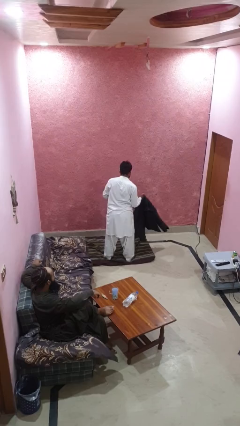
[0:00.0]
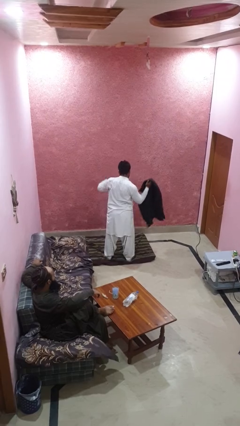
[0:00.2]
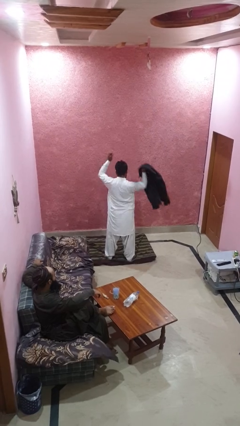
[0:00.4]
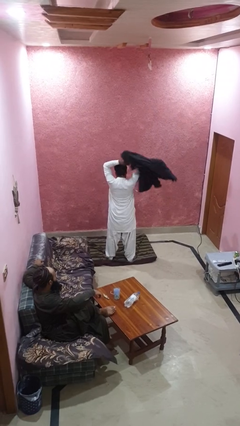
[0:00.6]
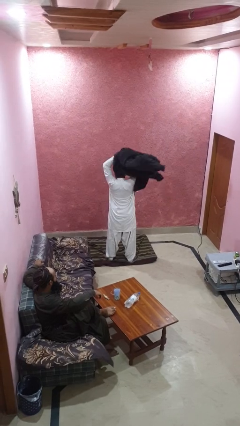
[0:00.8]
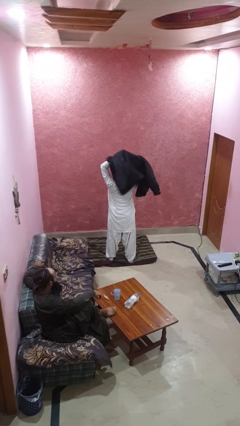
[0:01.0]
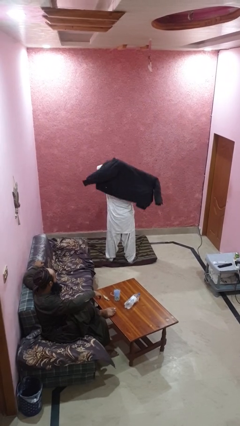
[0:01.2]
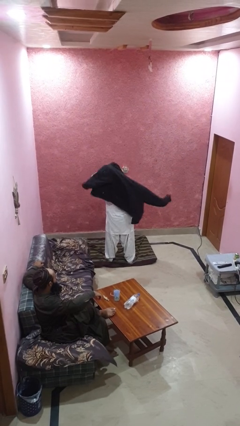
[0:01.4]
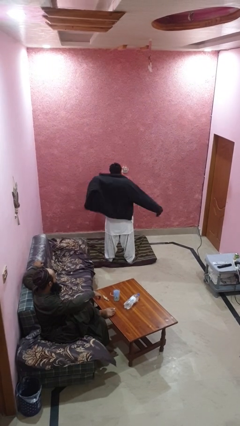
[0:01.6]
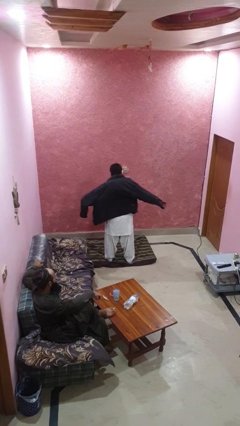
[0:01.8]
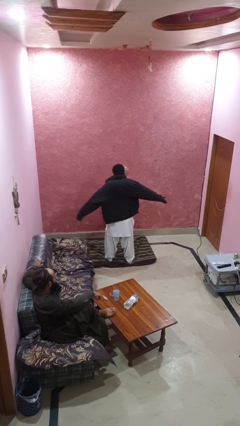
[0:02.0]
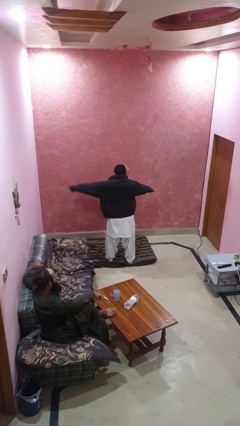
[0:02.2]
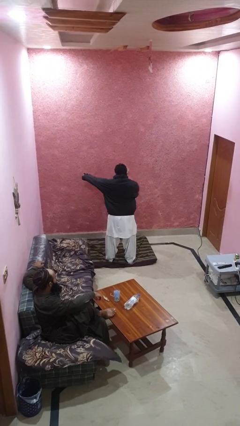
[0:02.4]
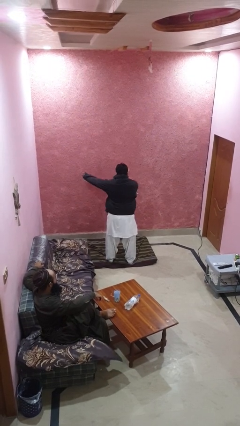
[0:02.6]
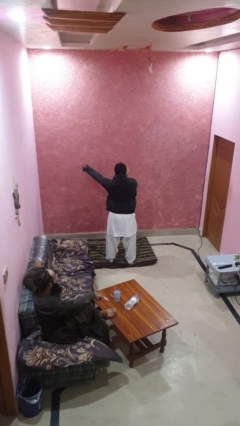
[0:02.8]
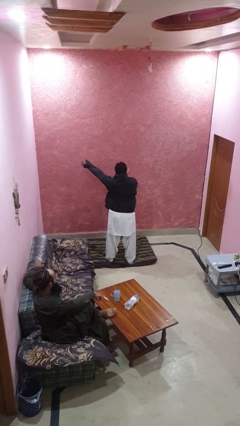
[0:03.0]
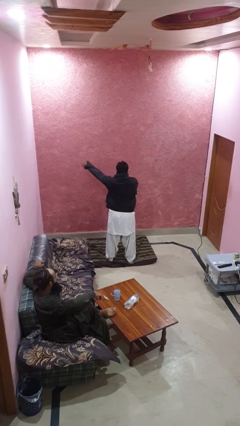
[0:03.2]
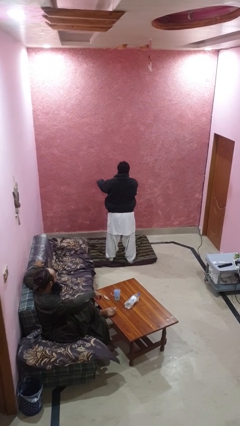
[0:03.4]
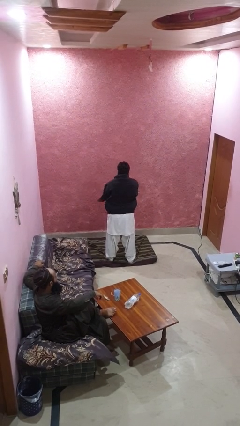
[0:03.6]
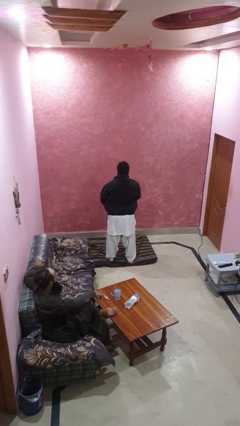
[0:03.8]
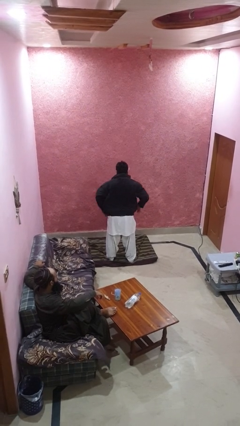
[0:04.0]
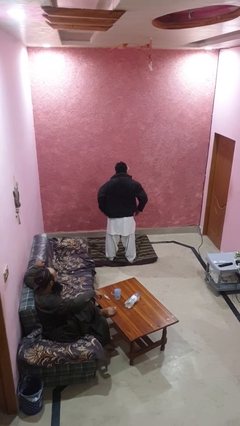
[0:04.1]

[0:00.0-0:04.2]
person puts on jacket

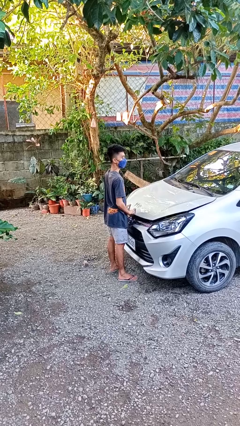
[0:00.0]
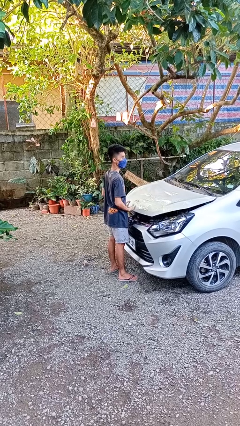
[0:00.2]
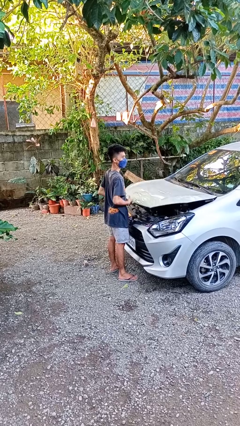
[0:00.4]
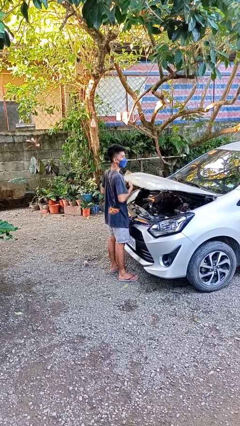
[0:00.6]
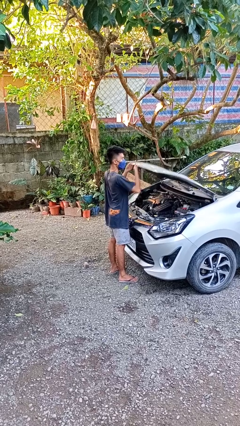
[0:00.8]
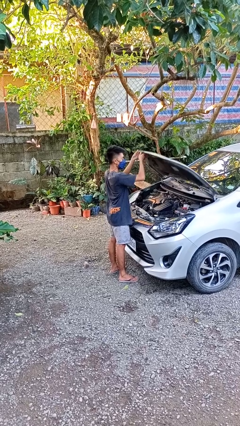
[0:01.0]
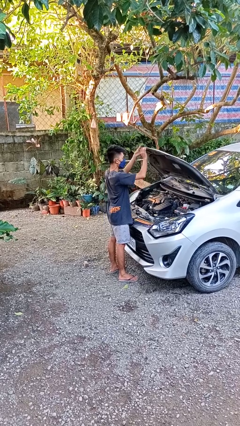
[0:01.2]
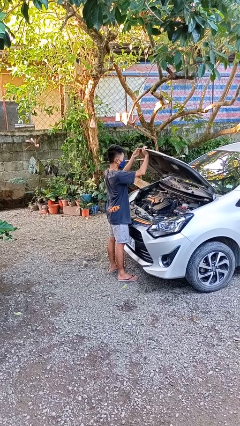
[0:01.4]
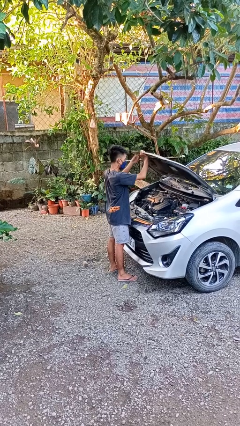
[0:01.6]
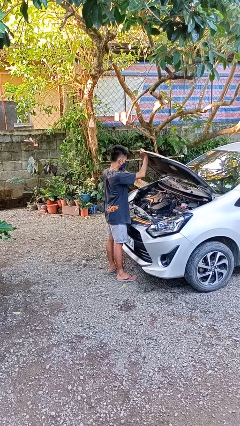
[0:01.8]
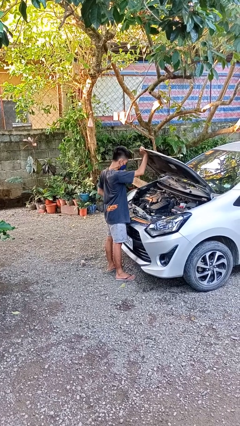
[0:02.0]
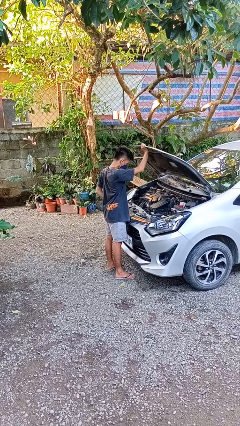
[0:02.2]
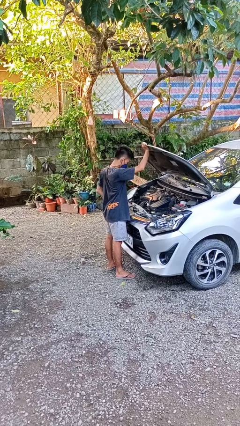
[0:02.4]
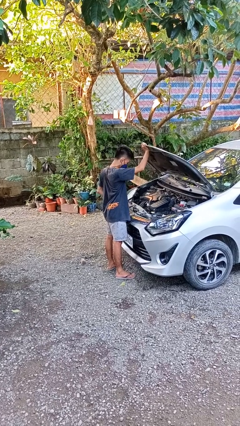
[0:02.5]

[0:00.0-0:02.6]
person opens car hood

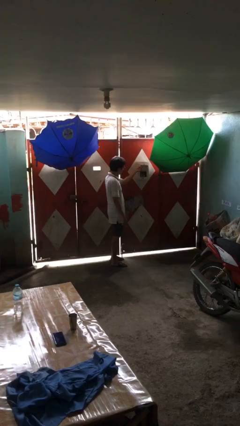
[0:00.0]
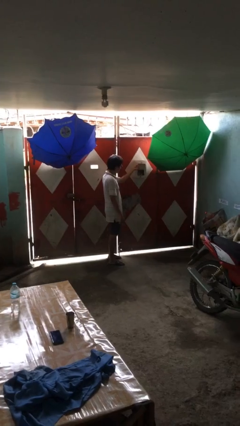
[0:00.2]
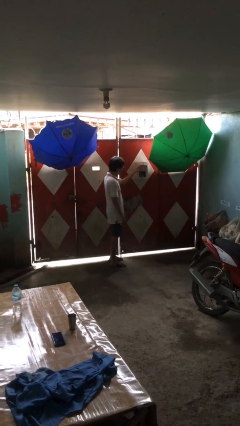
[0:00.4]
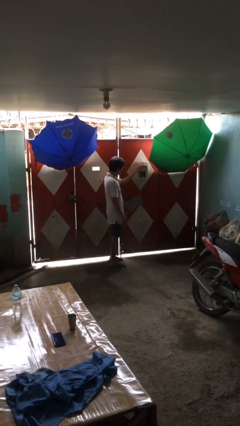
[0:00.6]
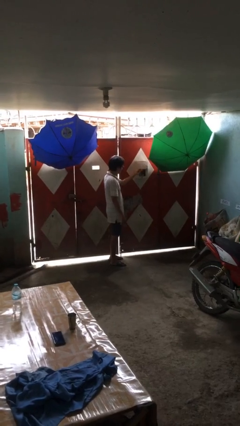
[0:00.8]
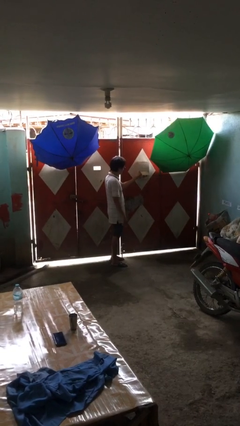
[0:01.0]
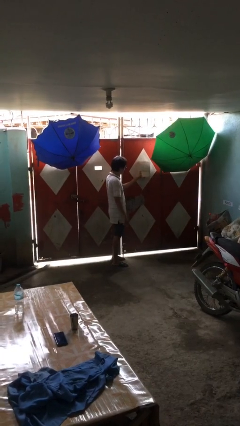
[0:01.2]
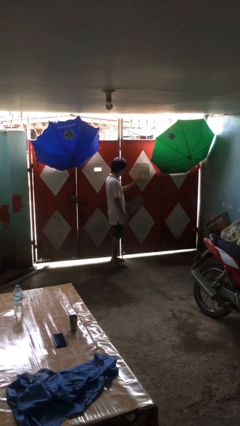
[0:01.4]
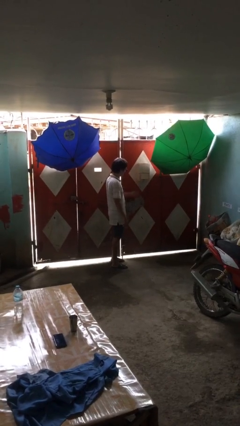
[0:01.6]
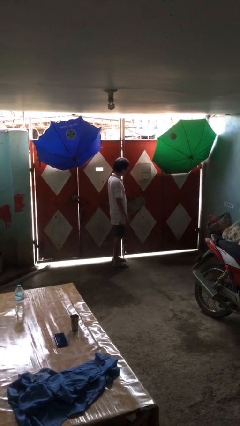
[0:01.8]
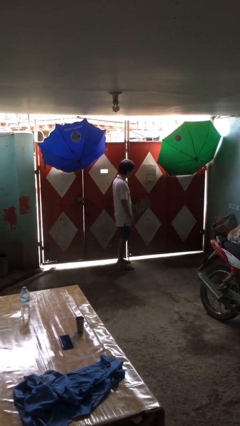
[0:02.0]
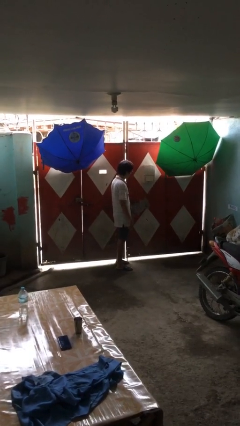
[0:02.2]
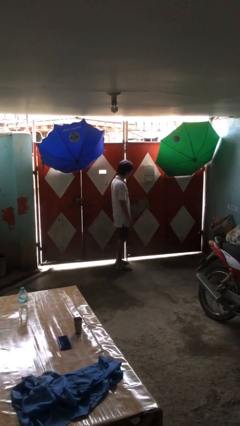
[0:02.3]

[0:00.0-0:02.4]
person closes mailbox

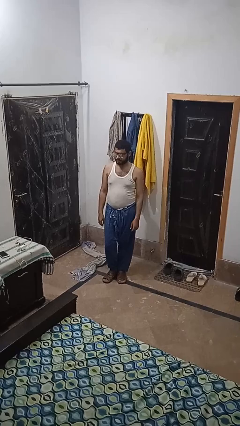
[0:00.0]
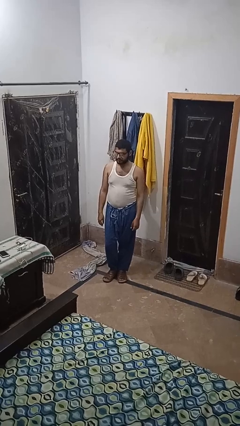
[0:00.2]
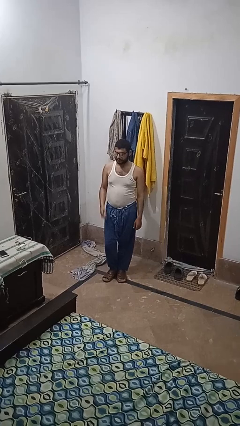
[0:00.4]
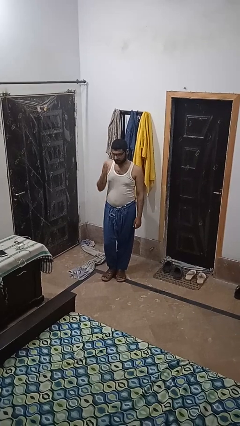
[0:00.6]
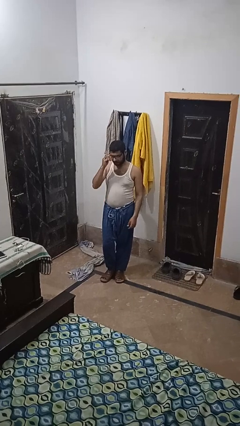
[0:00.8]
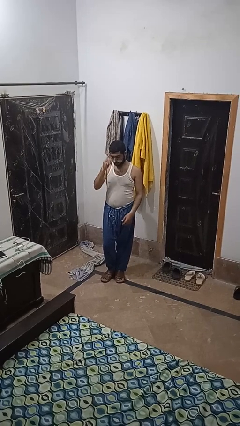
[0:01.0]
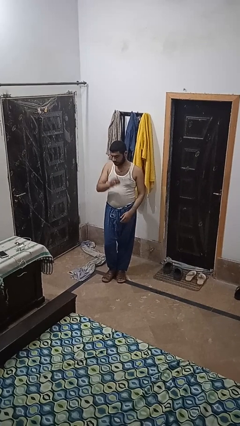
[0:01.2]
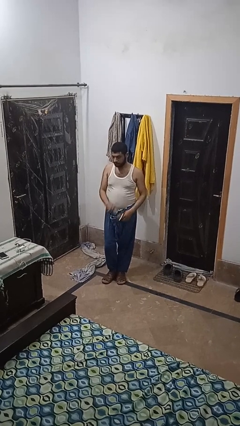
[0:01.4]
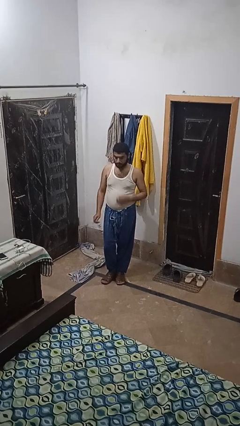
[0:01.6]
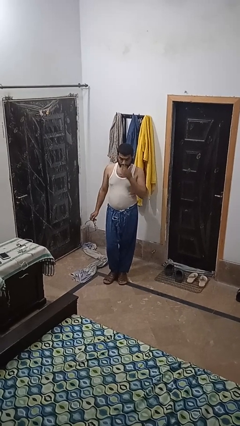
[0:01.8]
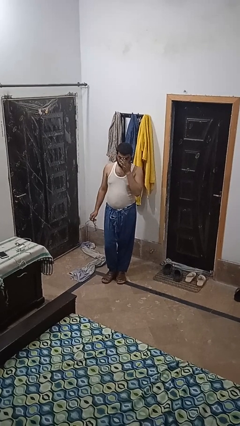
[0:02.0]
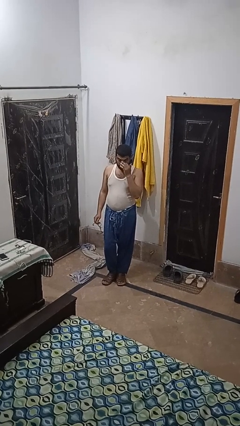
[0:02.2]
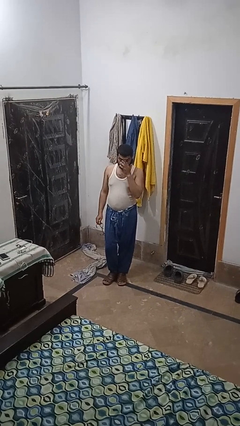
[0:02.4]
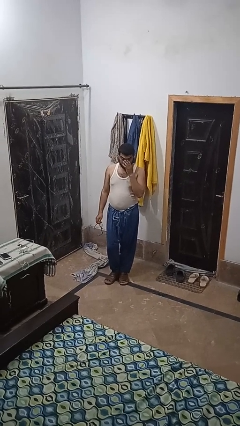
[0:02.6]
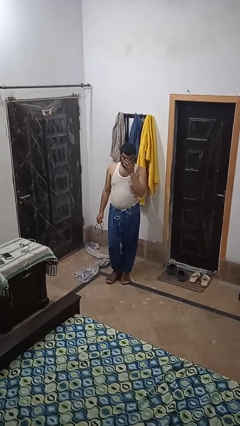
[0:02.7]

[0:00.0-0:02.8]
person takes off glasses

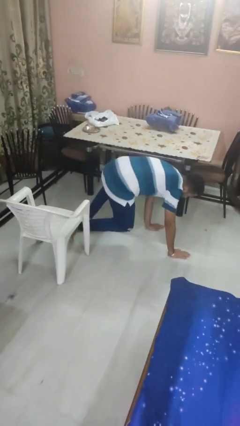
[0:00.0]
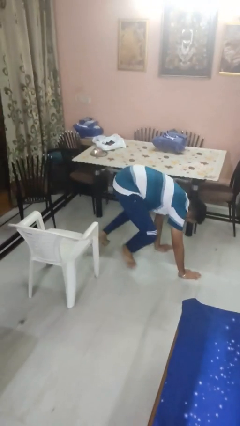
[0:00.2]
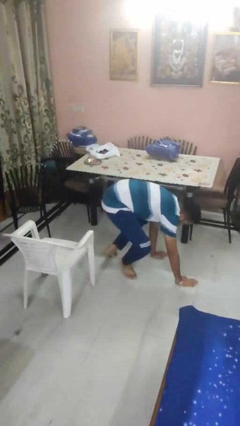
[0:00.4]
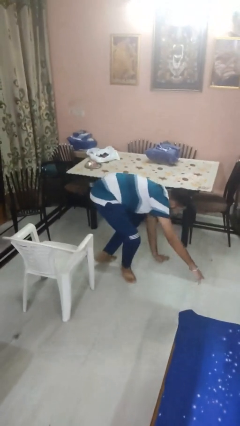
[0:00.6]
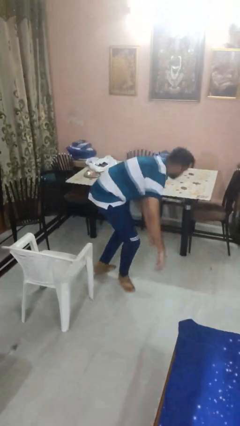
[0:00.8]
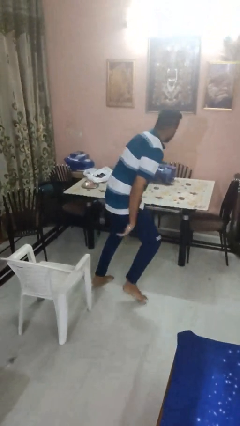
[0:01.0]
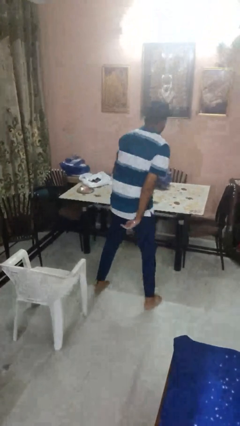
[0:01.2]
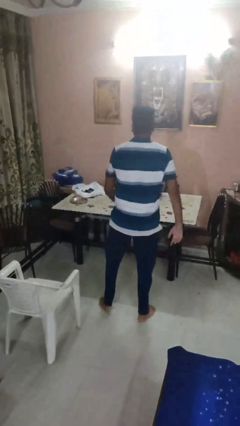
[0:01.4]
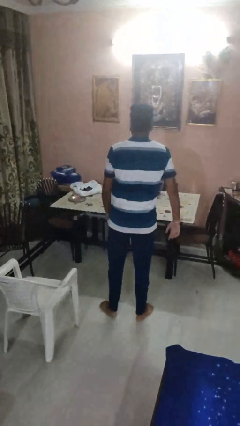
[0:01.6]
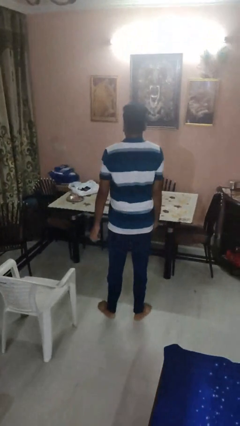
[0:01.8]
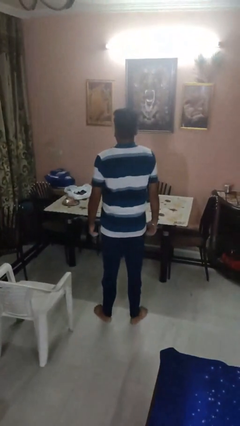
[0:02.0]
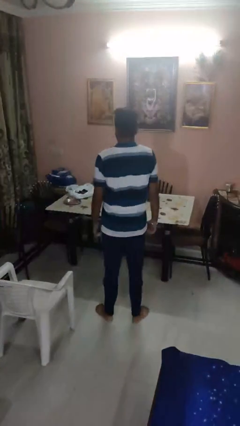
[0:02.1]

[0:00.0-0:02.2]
person stands up from floor

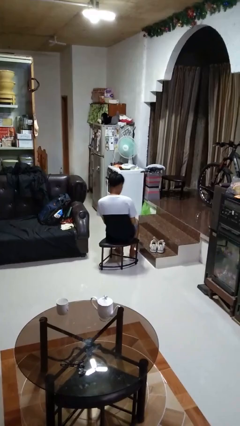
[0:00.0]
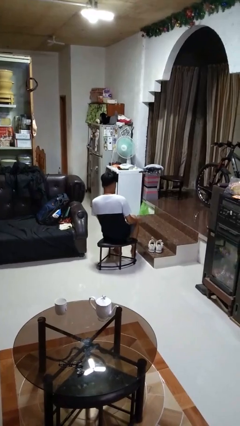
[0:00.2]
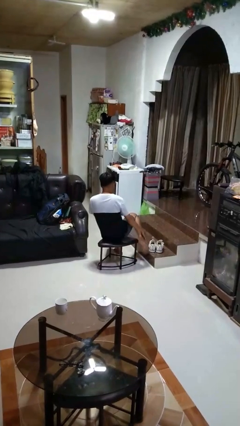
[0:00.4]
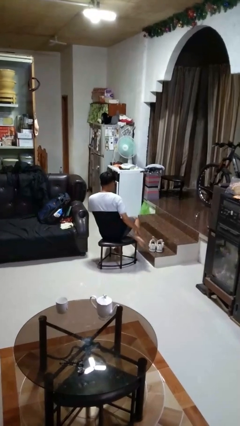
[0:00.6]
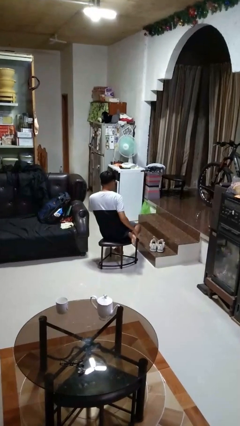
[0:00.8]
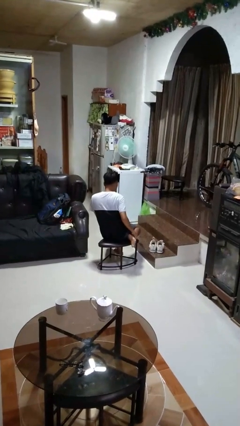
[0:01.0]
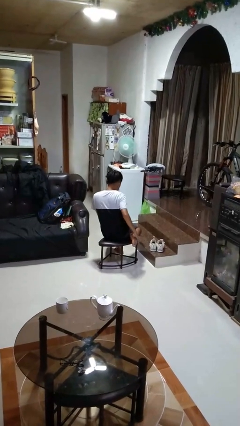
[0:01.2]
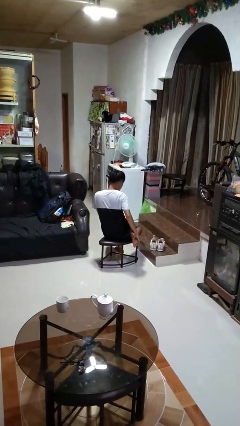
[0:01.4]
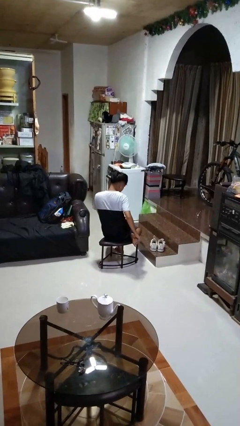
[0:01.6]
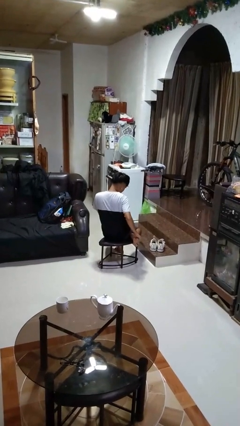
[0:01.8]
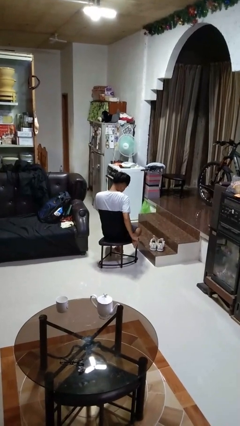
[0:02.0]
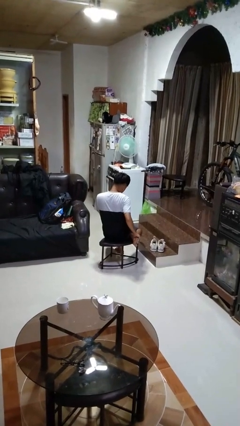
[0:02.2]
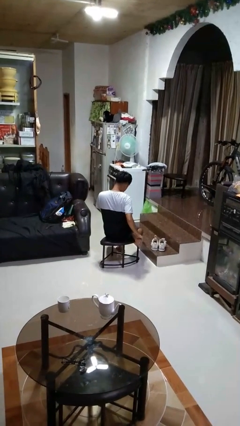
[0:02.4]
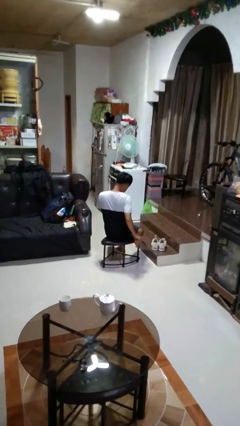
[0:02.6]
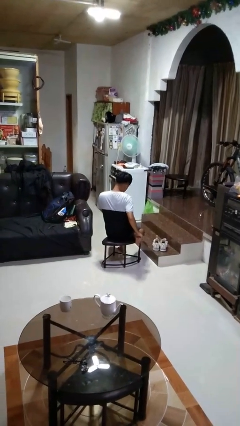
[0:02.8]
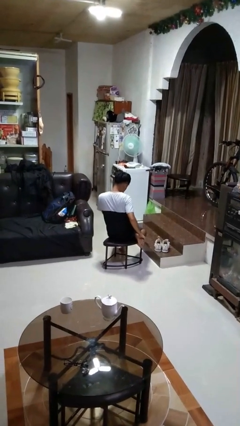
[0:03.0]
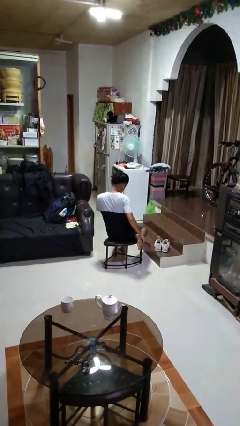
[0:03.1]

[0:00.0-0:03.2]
person rubs foot
